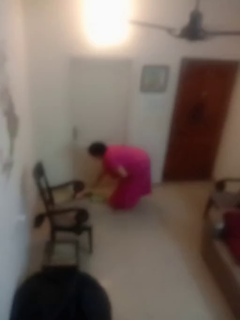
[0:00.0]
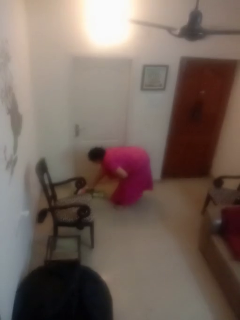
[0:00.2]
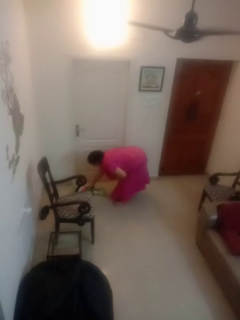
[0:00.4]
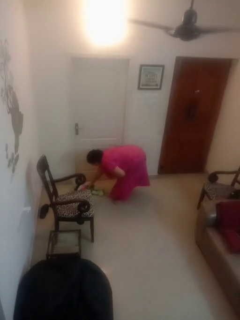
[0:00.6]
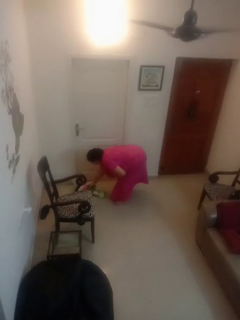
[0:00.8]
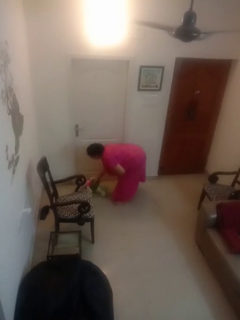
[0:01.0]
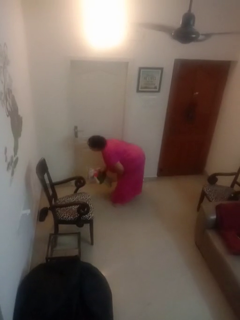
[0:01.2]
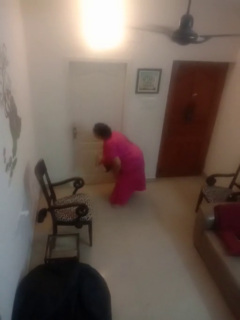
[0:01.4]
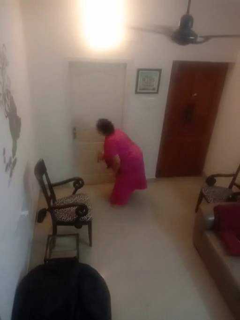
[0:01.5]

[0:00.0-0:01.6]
person picks up object from floor

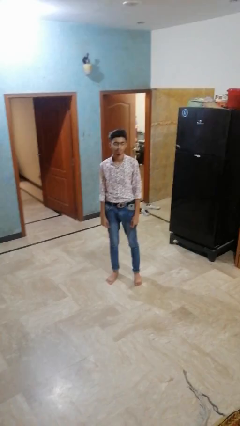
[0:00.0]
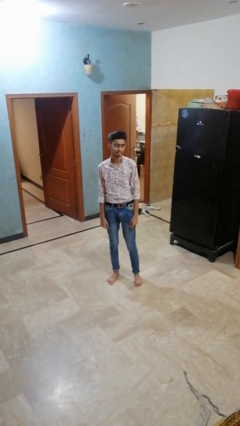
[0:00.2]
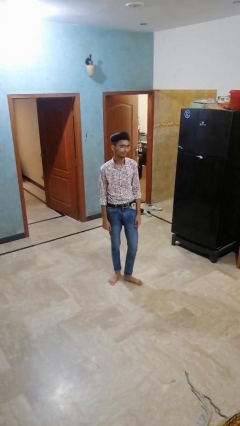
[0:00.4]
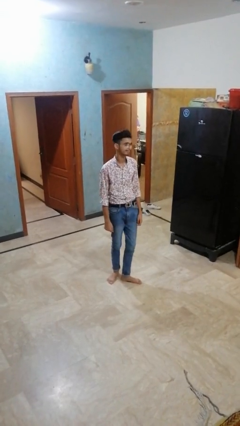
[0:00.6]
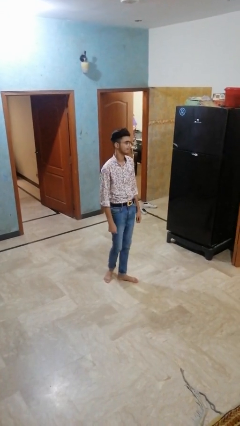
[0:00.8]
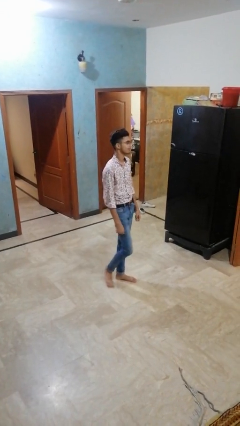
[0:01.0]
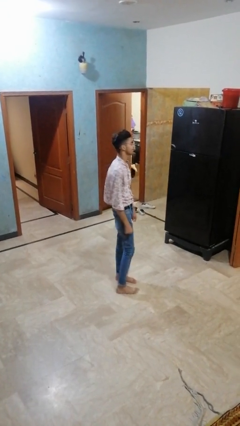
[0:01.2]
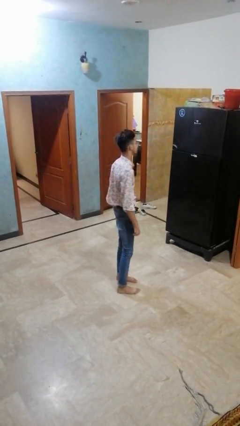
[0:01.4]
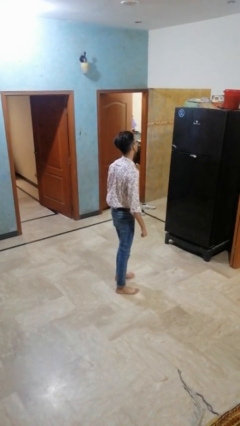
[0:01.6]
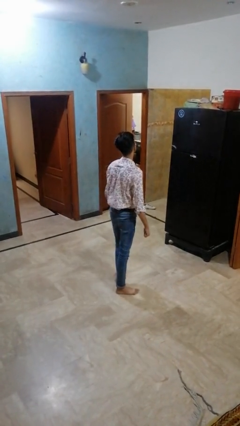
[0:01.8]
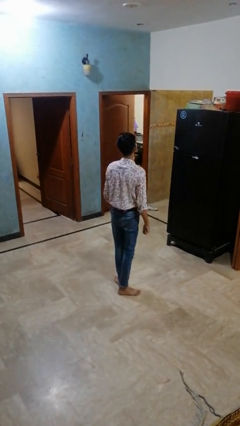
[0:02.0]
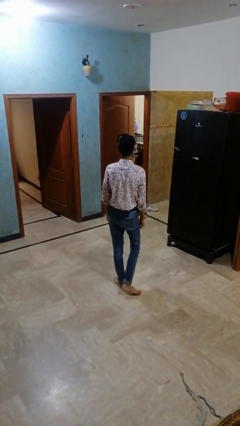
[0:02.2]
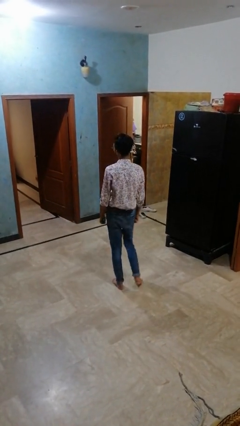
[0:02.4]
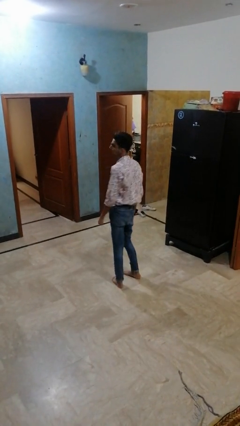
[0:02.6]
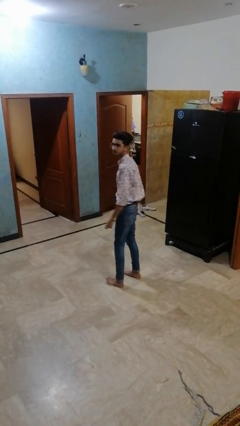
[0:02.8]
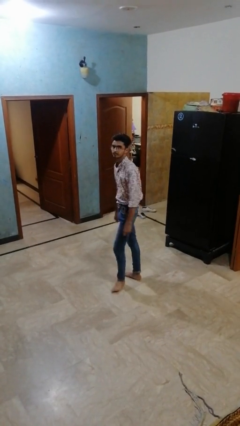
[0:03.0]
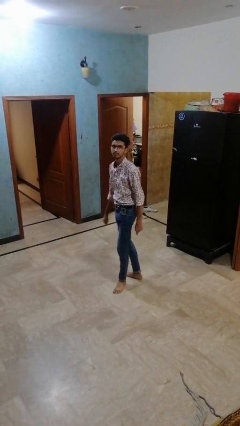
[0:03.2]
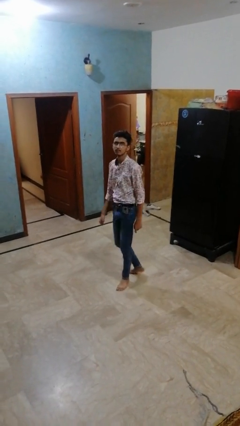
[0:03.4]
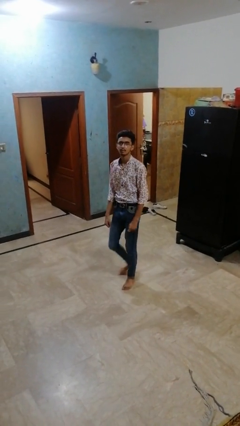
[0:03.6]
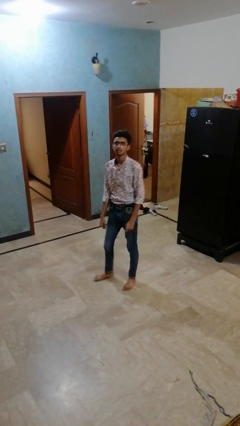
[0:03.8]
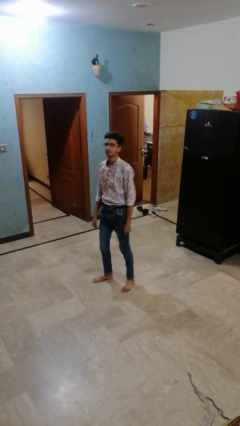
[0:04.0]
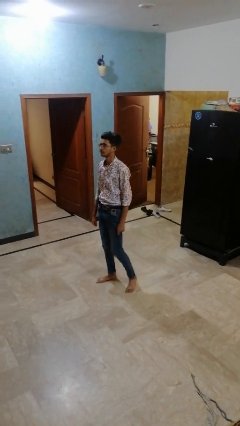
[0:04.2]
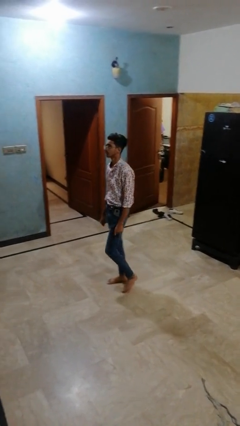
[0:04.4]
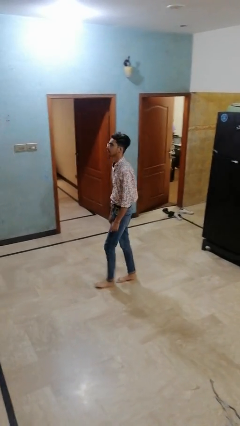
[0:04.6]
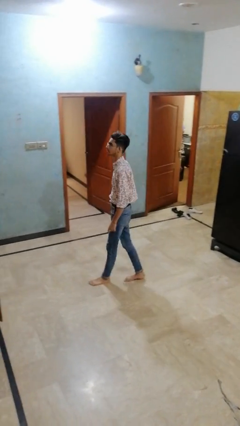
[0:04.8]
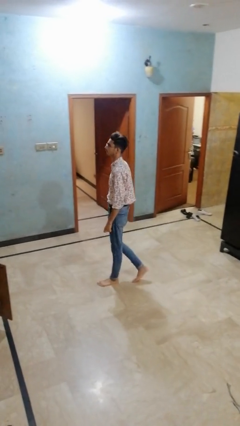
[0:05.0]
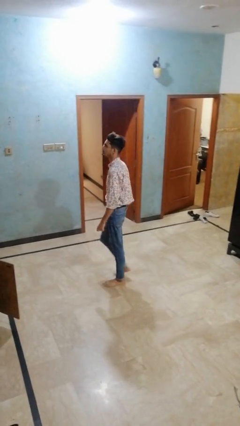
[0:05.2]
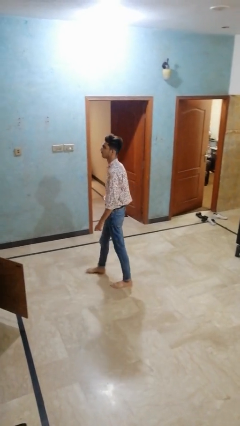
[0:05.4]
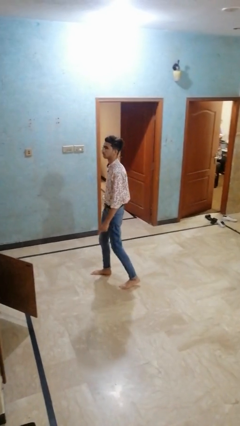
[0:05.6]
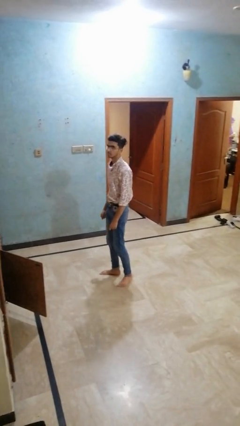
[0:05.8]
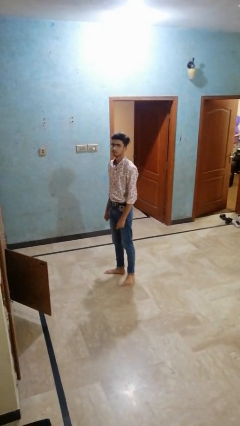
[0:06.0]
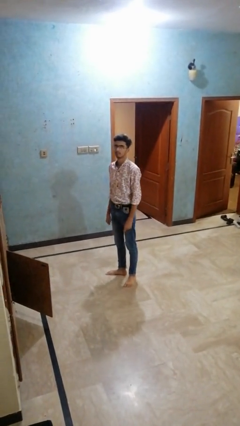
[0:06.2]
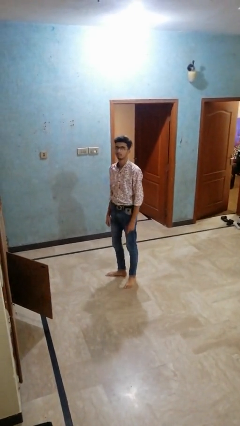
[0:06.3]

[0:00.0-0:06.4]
person twirls

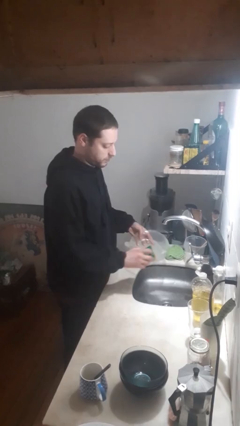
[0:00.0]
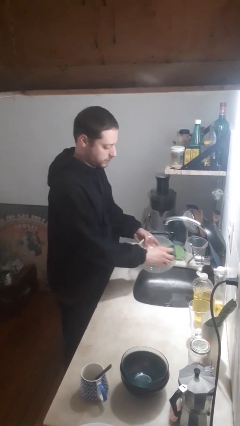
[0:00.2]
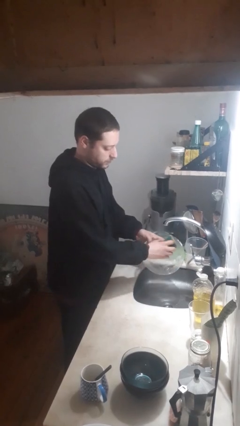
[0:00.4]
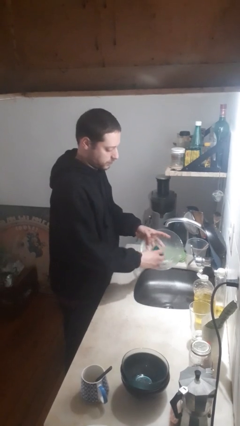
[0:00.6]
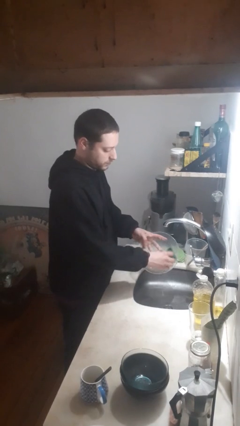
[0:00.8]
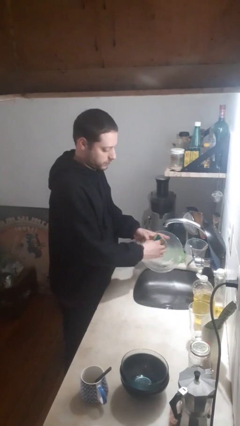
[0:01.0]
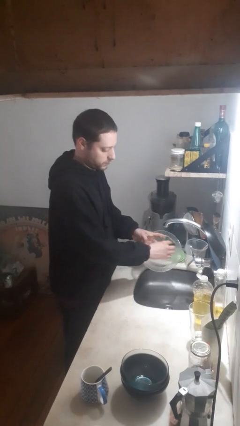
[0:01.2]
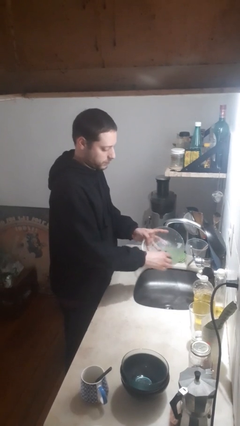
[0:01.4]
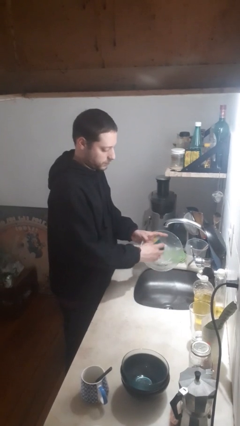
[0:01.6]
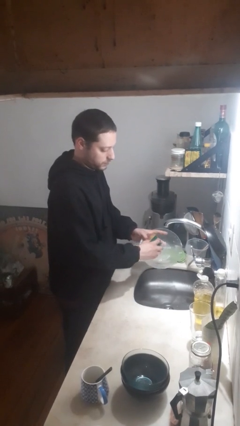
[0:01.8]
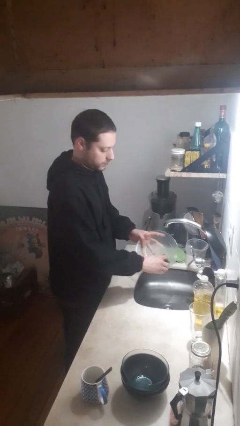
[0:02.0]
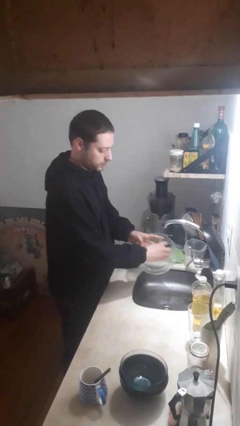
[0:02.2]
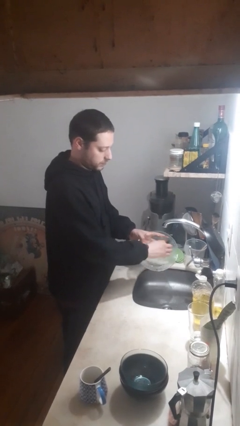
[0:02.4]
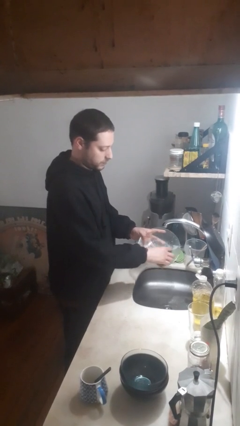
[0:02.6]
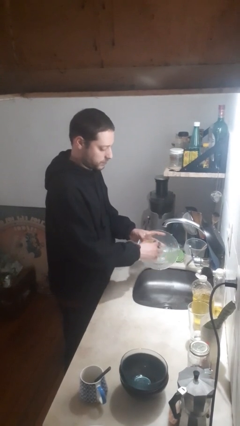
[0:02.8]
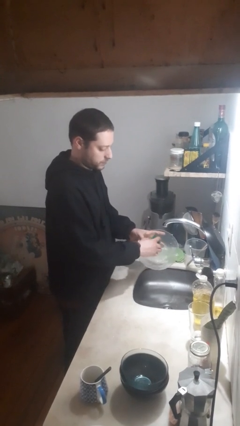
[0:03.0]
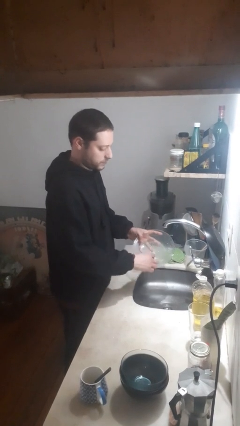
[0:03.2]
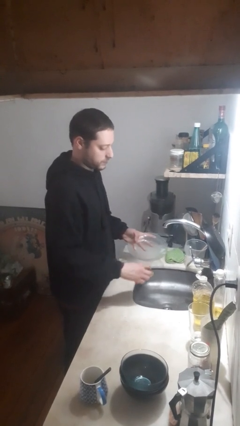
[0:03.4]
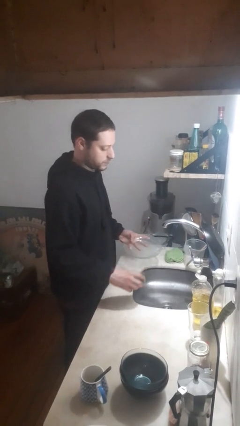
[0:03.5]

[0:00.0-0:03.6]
person washes dish

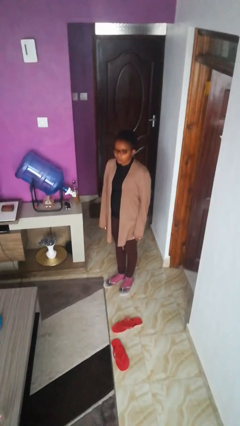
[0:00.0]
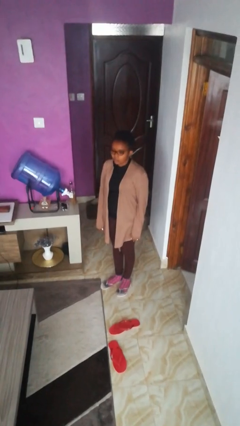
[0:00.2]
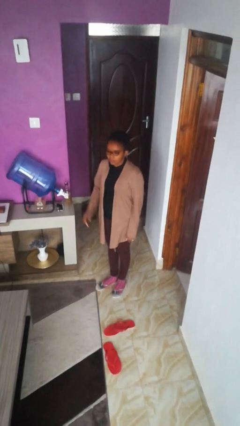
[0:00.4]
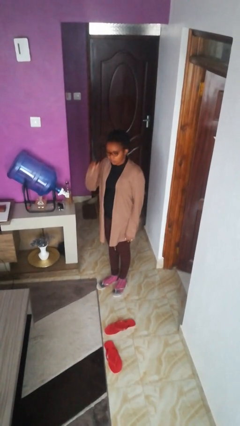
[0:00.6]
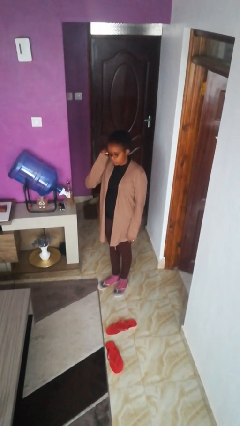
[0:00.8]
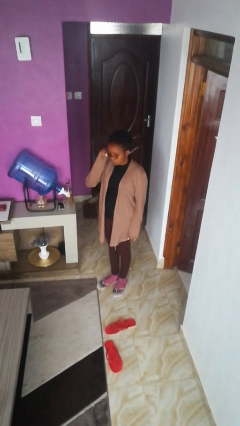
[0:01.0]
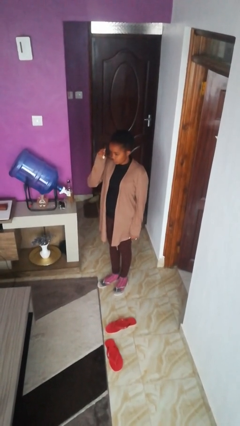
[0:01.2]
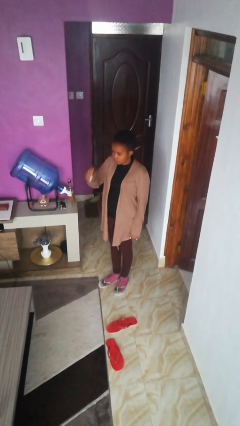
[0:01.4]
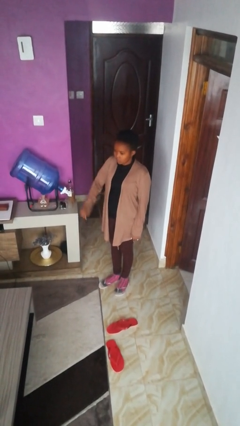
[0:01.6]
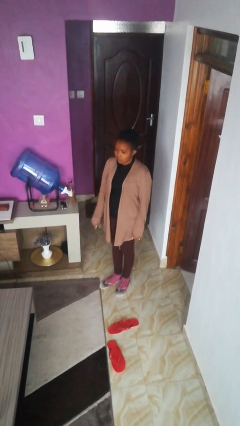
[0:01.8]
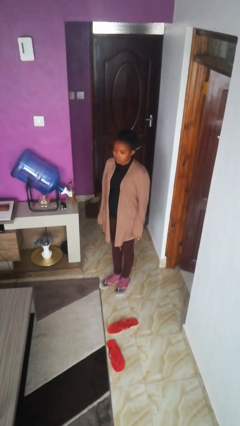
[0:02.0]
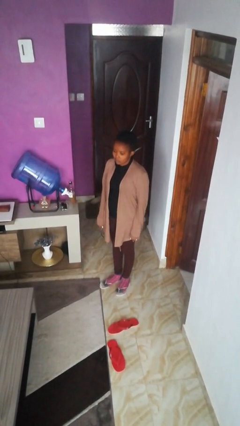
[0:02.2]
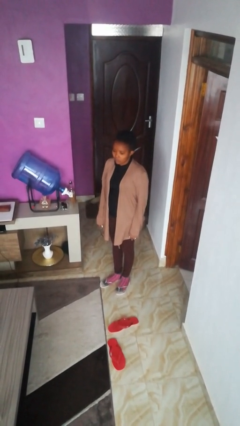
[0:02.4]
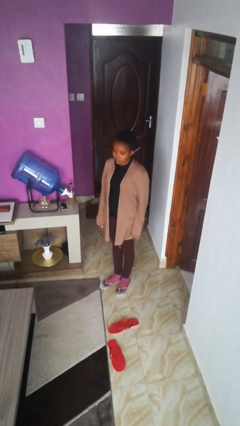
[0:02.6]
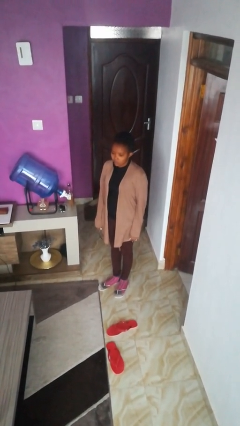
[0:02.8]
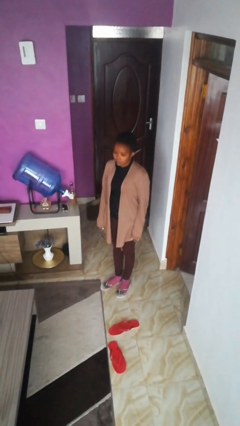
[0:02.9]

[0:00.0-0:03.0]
person takes off glasses

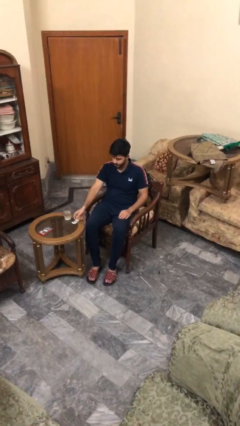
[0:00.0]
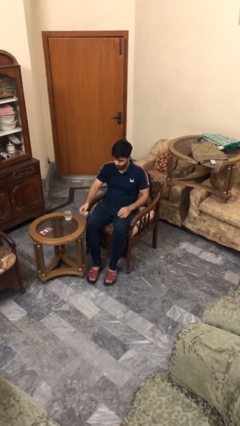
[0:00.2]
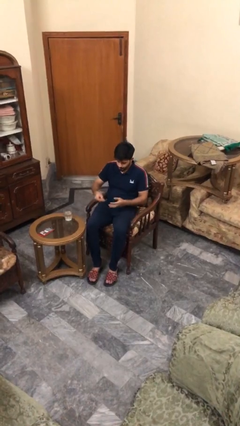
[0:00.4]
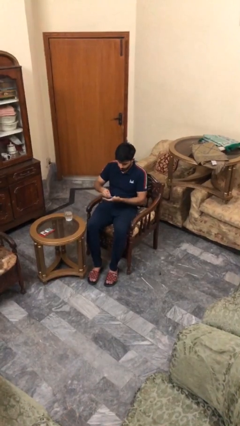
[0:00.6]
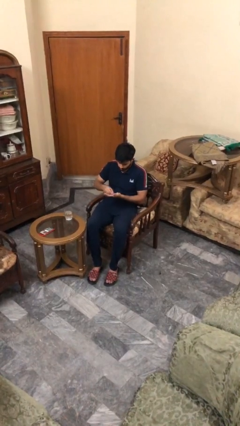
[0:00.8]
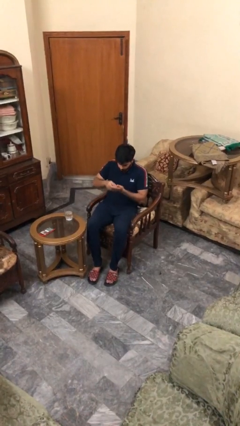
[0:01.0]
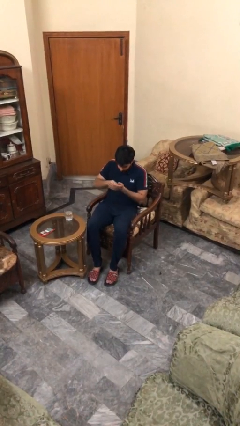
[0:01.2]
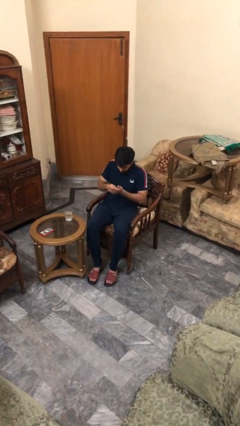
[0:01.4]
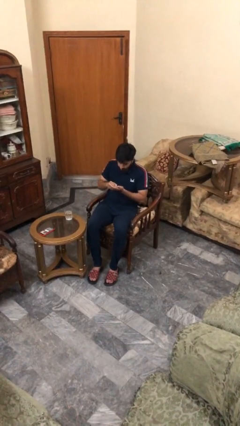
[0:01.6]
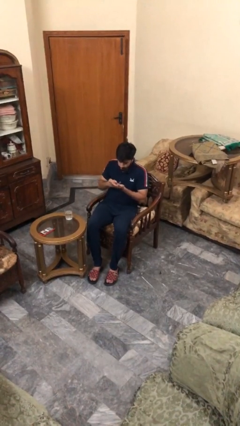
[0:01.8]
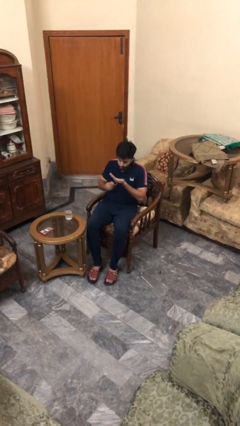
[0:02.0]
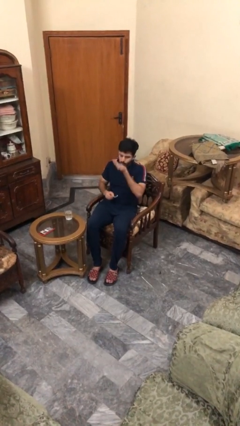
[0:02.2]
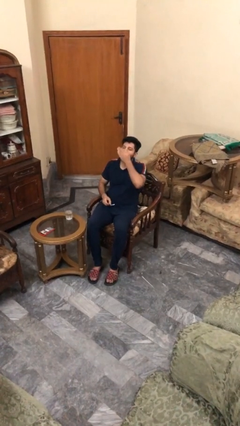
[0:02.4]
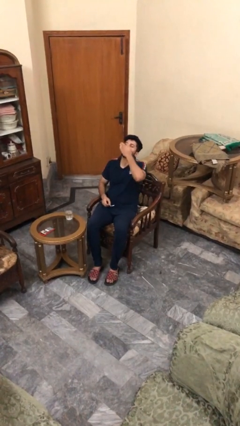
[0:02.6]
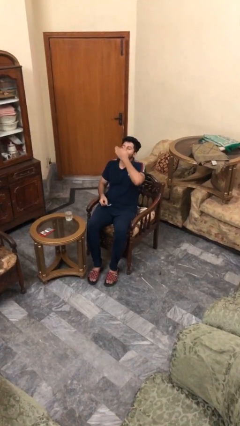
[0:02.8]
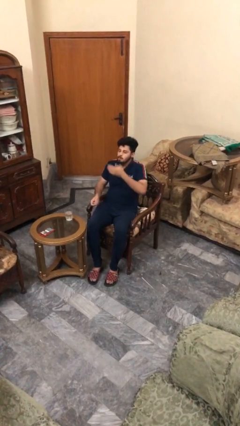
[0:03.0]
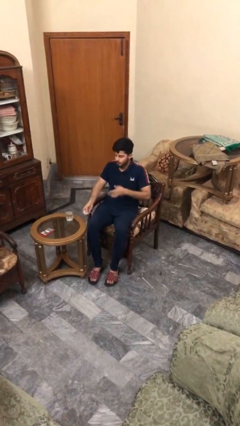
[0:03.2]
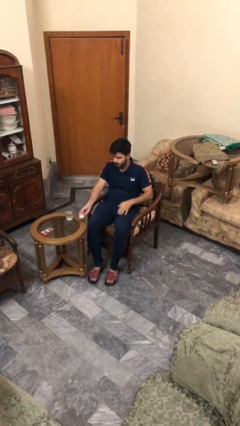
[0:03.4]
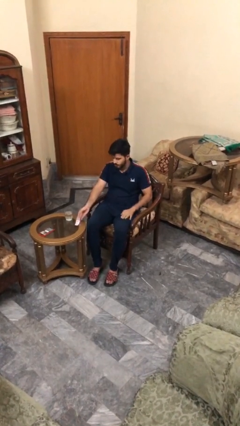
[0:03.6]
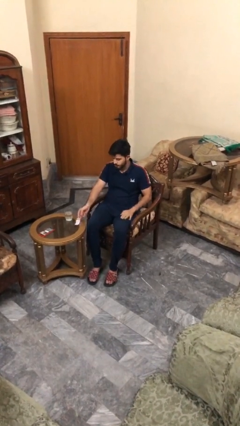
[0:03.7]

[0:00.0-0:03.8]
person takes medicine pills
